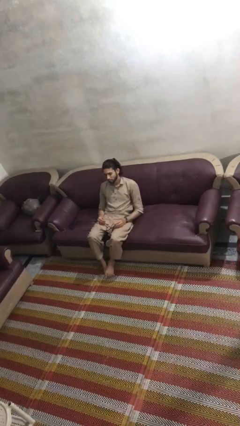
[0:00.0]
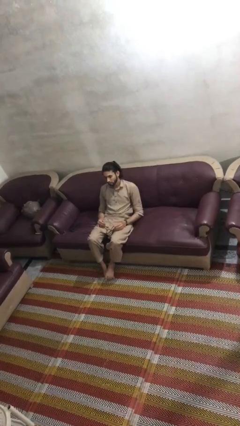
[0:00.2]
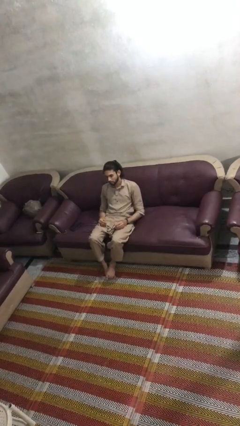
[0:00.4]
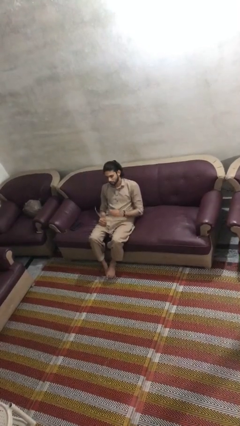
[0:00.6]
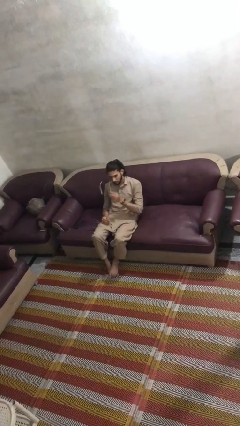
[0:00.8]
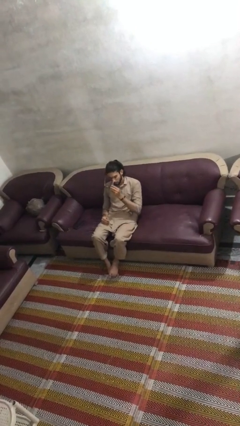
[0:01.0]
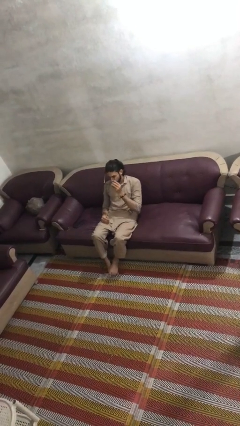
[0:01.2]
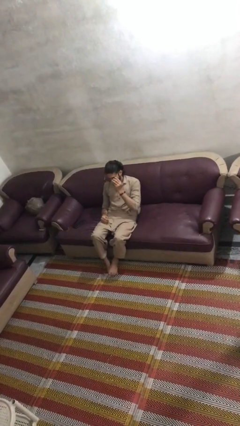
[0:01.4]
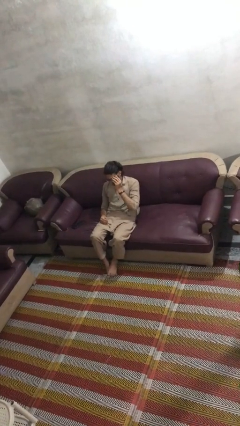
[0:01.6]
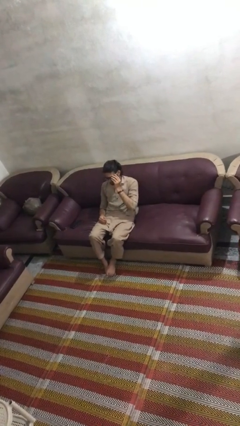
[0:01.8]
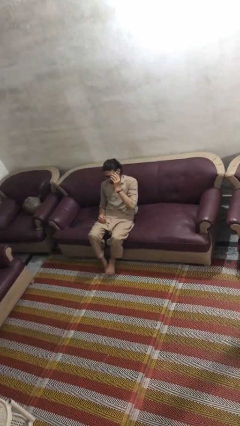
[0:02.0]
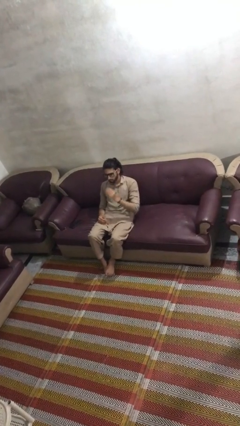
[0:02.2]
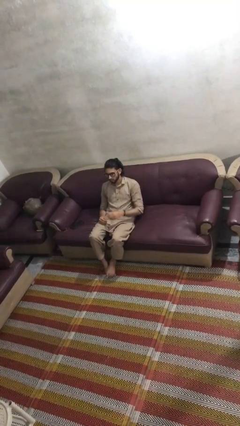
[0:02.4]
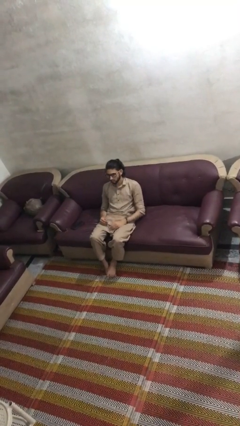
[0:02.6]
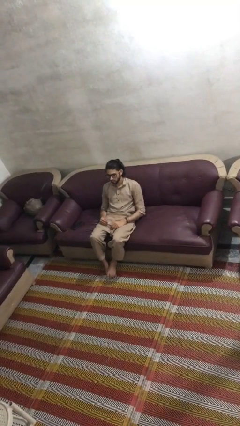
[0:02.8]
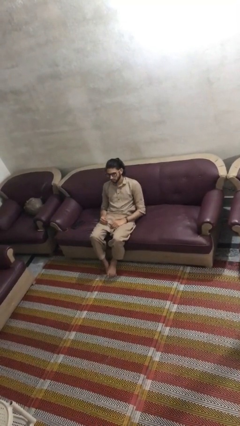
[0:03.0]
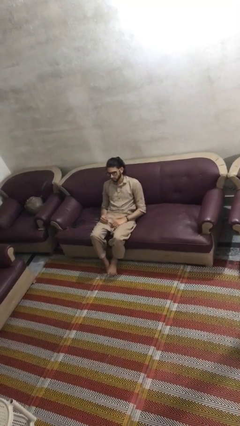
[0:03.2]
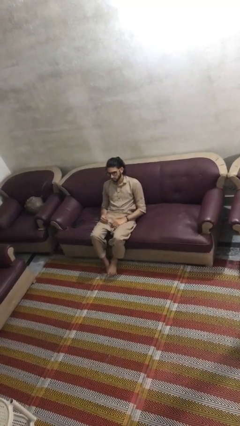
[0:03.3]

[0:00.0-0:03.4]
person puts on glasses

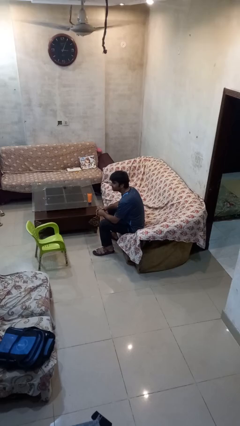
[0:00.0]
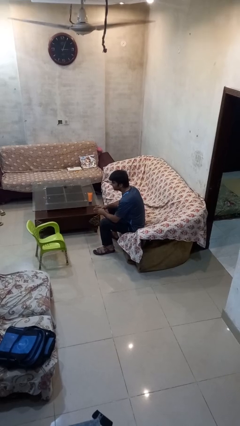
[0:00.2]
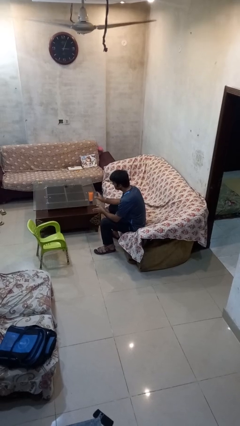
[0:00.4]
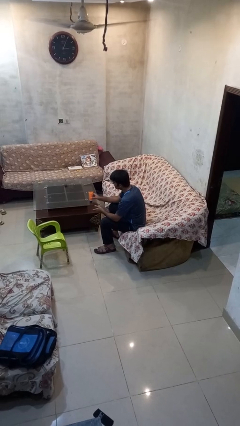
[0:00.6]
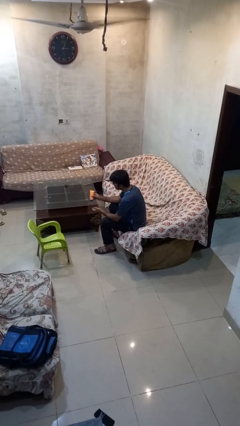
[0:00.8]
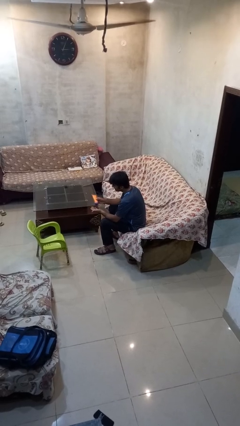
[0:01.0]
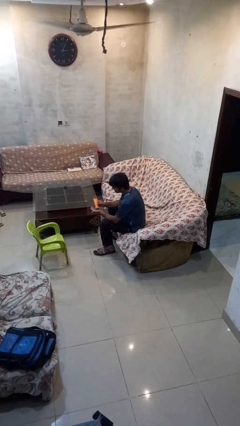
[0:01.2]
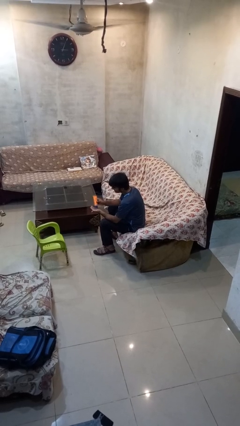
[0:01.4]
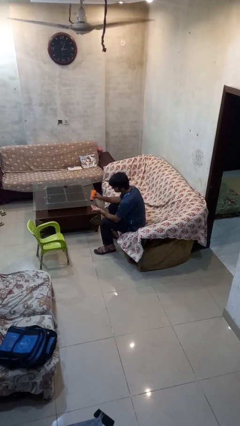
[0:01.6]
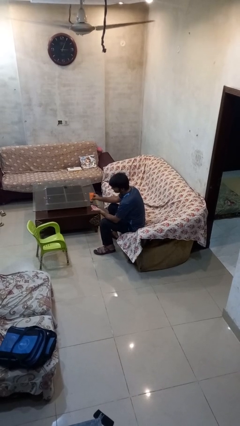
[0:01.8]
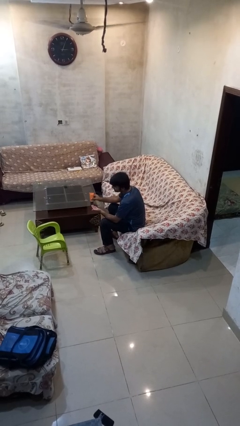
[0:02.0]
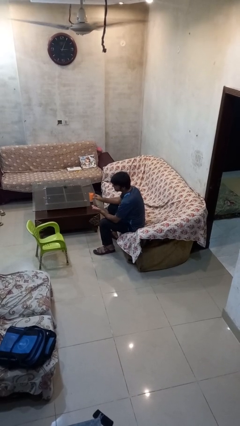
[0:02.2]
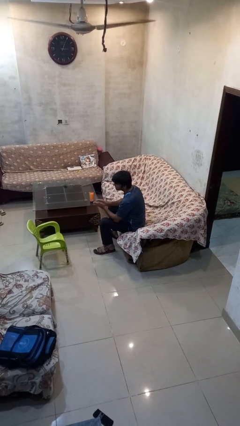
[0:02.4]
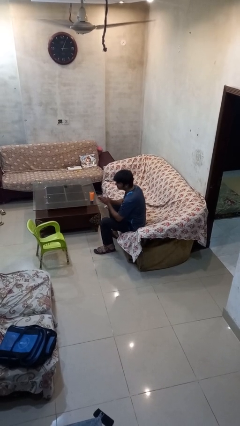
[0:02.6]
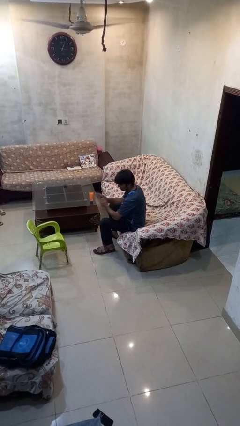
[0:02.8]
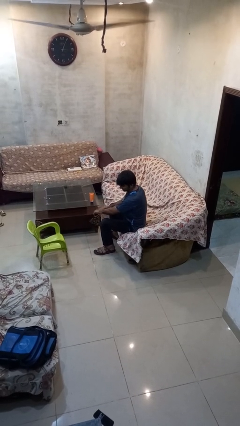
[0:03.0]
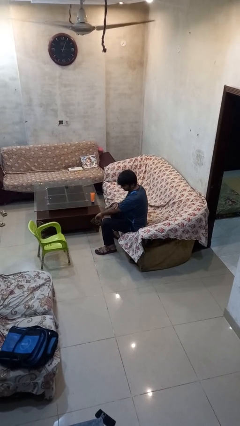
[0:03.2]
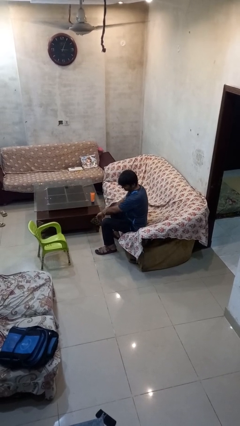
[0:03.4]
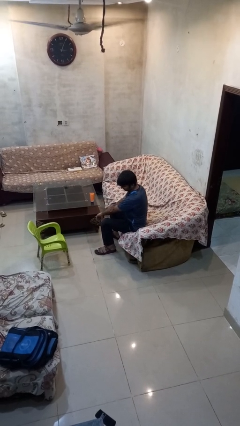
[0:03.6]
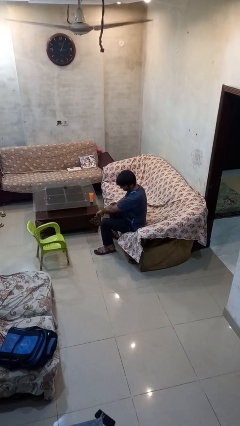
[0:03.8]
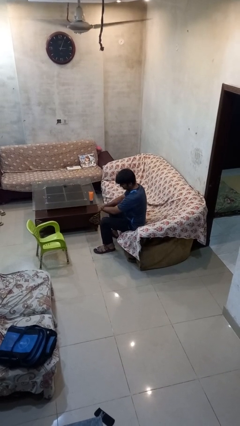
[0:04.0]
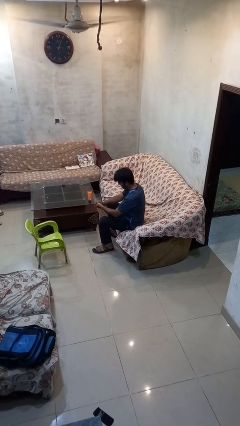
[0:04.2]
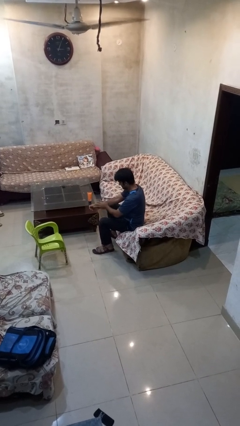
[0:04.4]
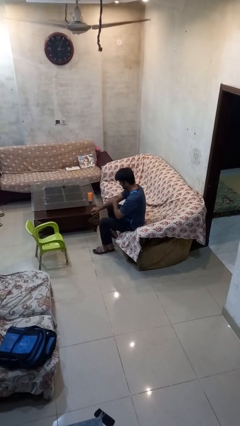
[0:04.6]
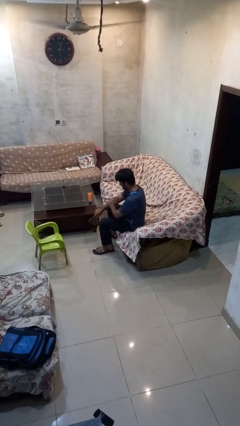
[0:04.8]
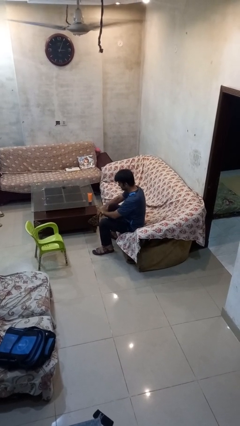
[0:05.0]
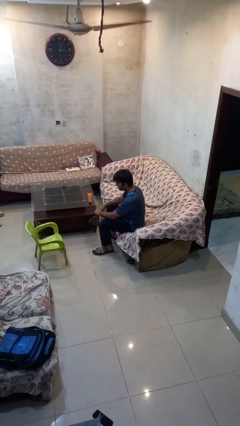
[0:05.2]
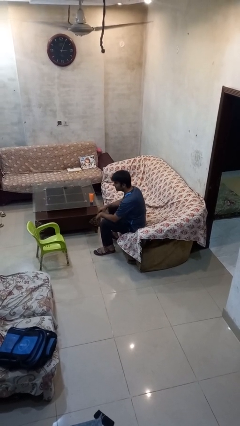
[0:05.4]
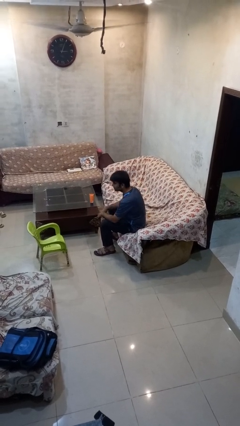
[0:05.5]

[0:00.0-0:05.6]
person applies sunscreen

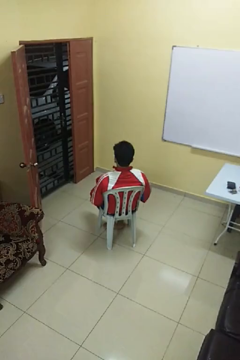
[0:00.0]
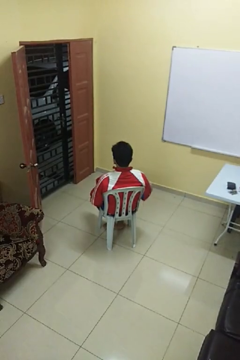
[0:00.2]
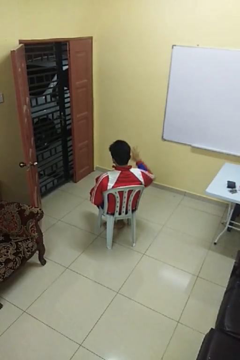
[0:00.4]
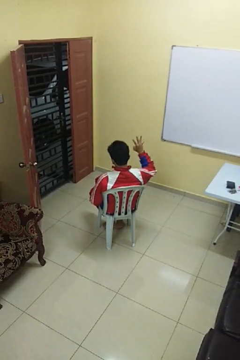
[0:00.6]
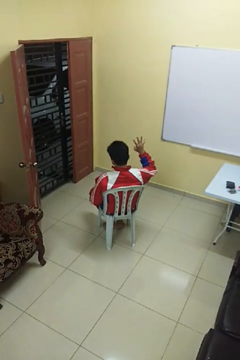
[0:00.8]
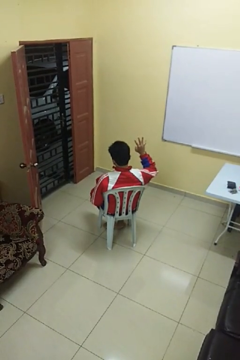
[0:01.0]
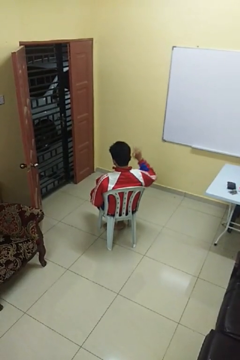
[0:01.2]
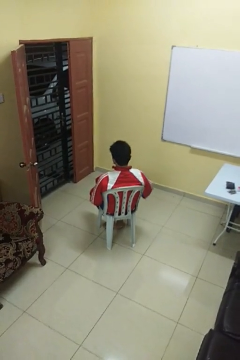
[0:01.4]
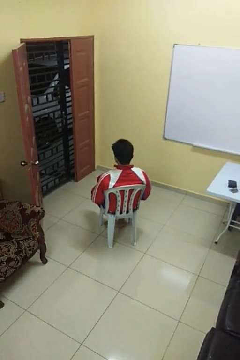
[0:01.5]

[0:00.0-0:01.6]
person gestures number four

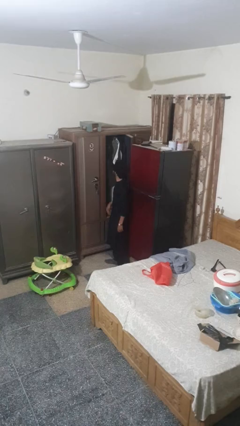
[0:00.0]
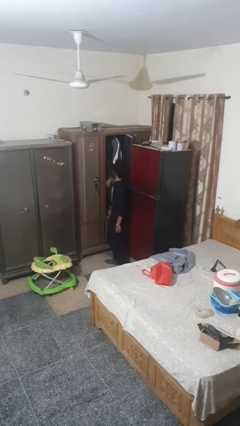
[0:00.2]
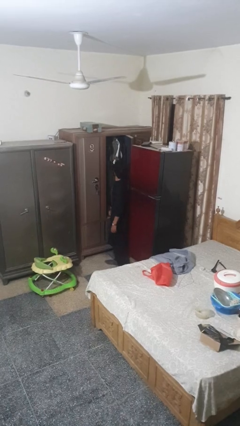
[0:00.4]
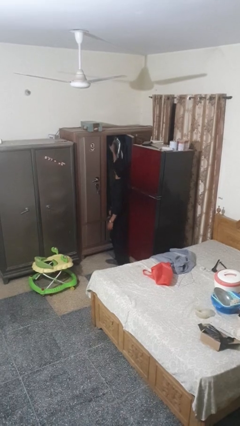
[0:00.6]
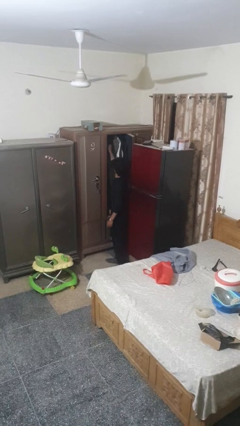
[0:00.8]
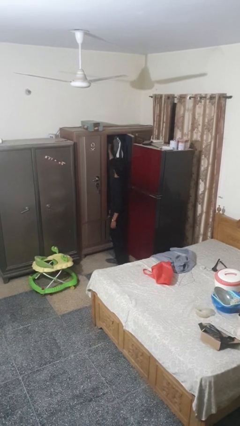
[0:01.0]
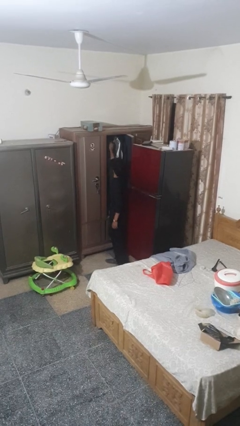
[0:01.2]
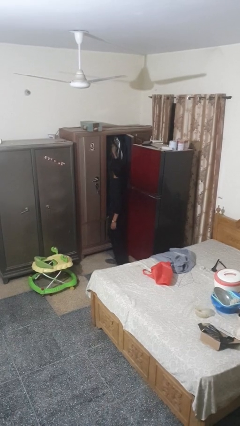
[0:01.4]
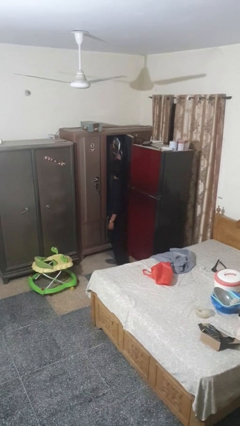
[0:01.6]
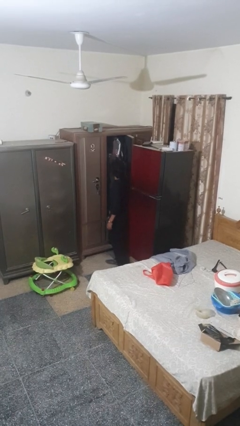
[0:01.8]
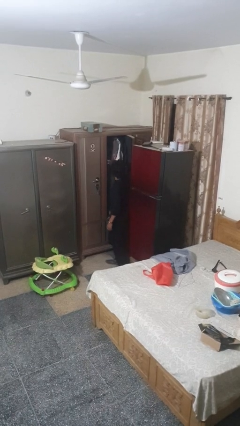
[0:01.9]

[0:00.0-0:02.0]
person takes clothes from closet

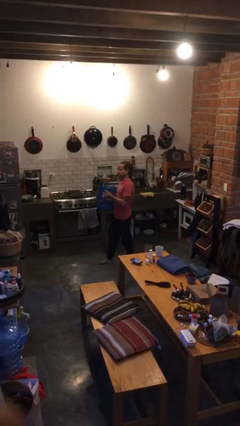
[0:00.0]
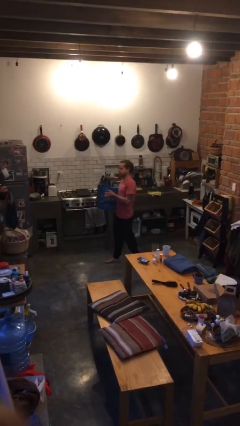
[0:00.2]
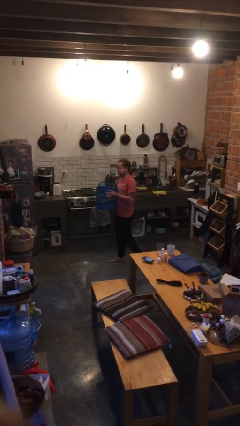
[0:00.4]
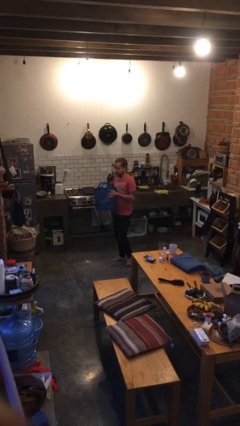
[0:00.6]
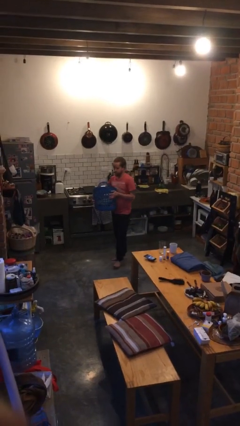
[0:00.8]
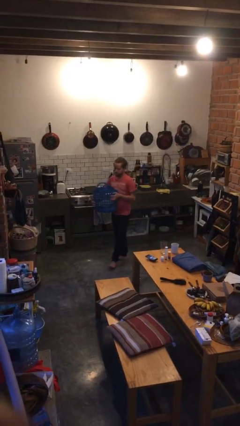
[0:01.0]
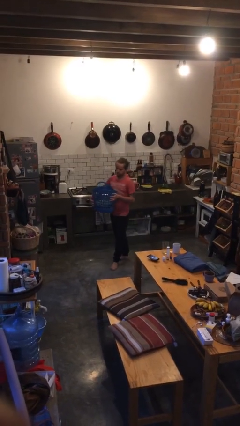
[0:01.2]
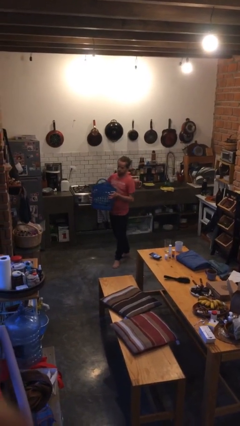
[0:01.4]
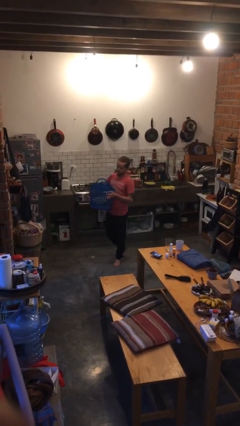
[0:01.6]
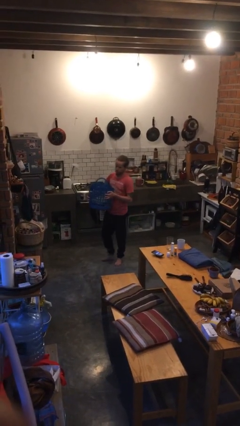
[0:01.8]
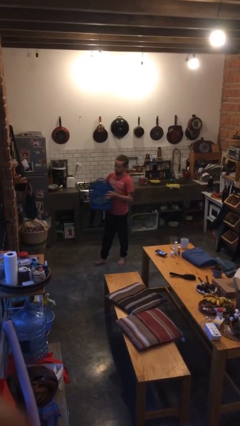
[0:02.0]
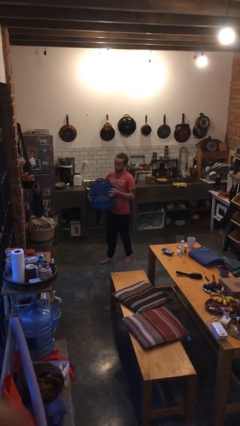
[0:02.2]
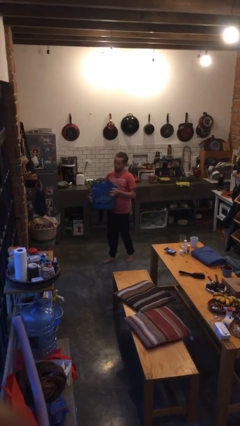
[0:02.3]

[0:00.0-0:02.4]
person carries laundry basket

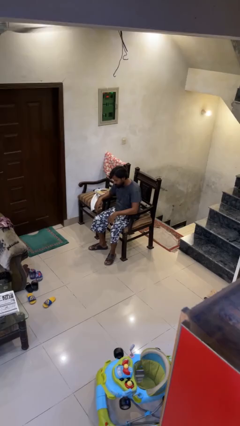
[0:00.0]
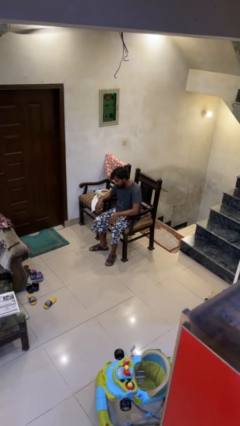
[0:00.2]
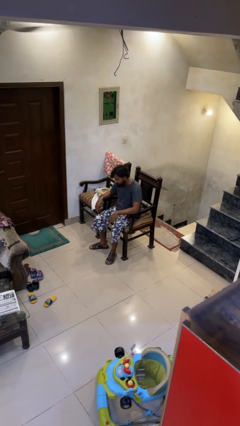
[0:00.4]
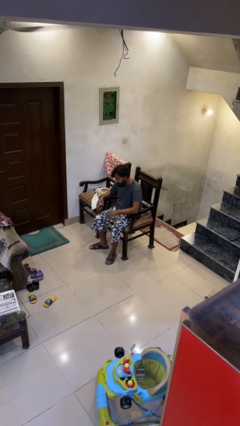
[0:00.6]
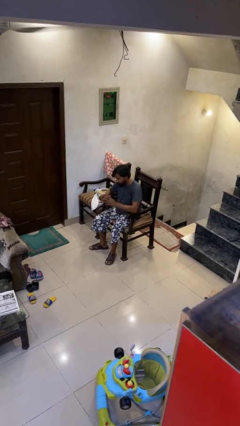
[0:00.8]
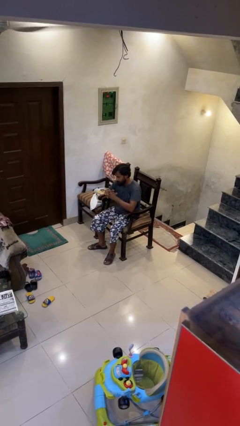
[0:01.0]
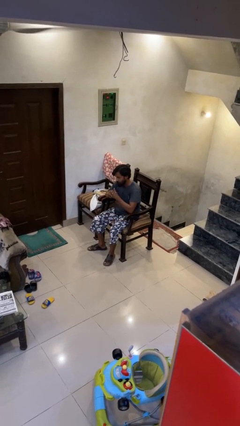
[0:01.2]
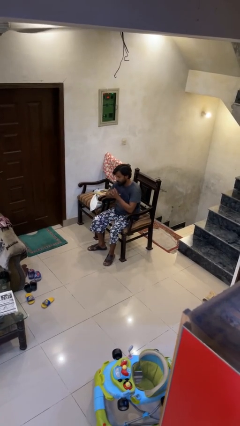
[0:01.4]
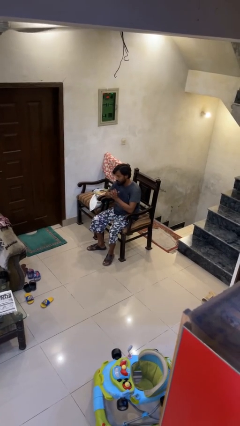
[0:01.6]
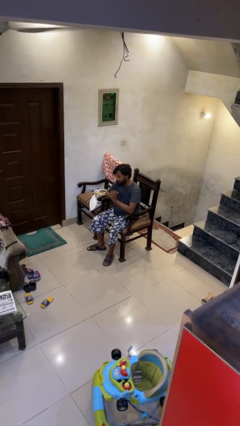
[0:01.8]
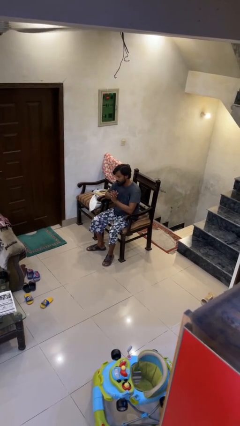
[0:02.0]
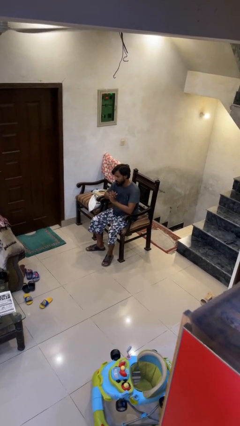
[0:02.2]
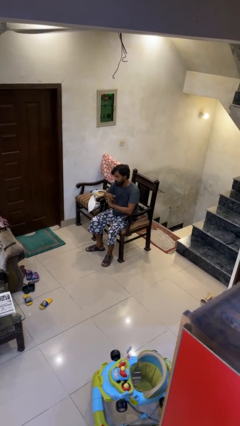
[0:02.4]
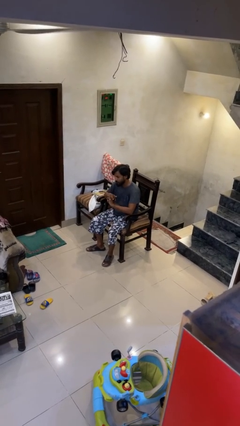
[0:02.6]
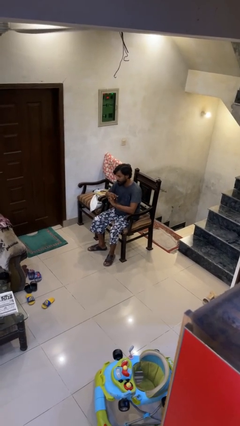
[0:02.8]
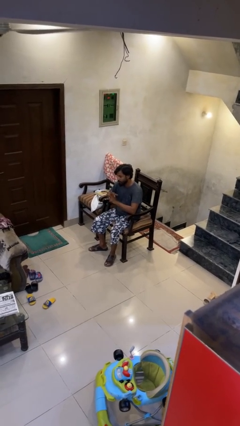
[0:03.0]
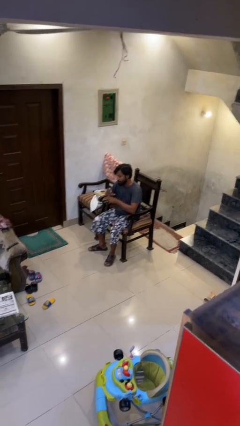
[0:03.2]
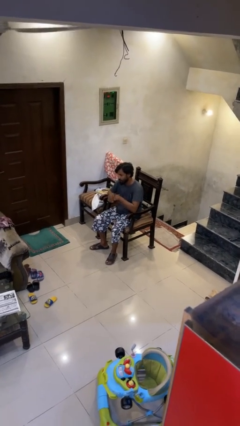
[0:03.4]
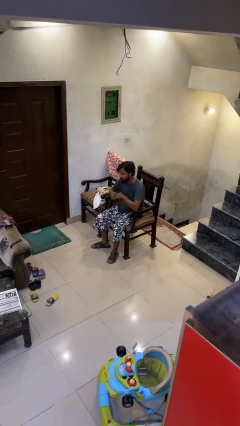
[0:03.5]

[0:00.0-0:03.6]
person cracks knuckles
